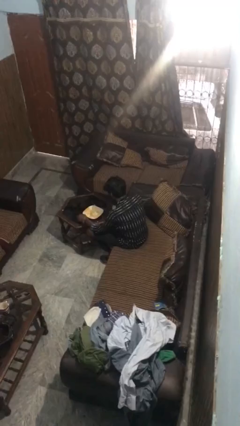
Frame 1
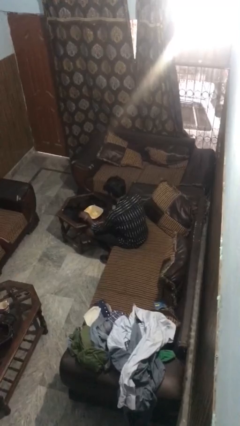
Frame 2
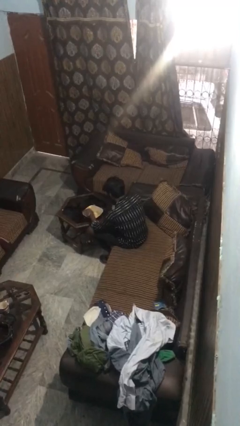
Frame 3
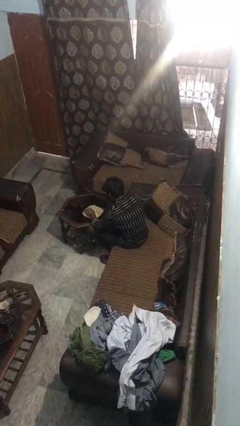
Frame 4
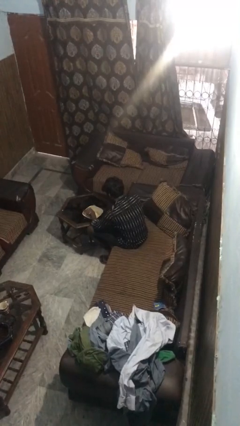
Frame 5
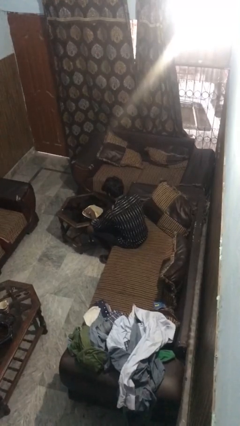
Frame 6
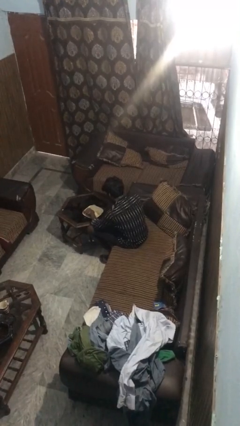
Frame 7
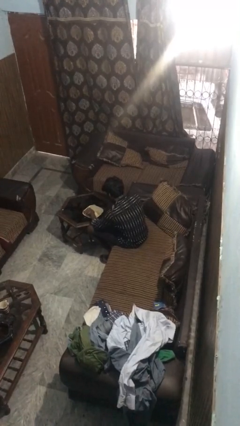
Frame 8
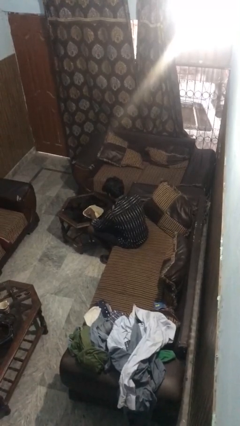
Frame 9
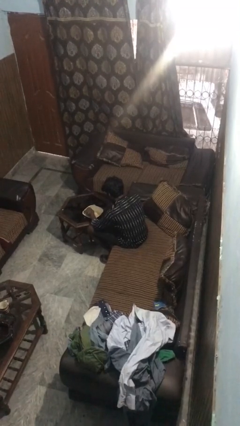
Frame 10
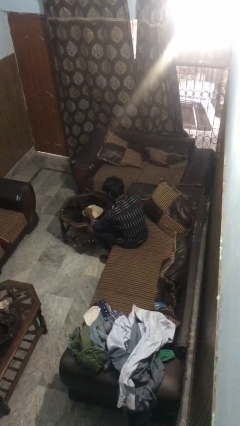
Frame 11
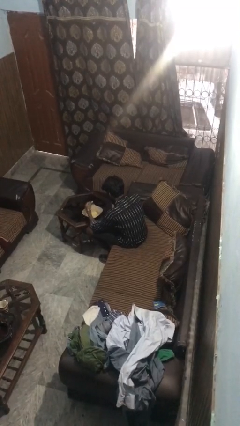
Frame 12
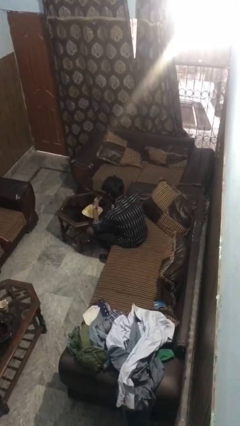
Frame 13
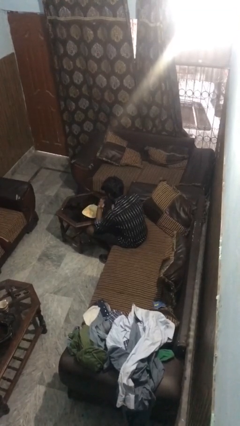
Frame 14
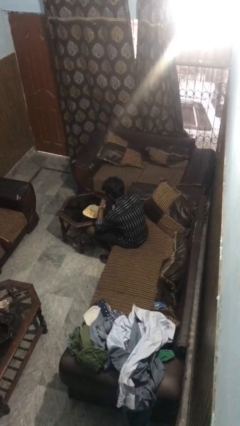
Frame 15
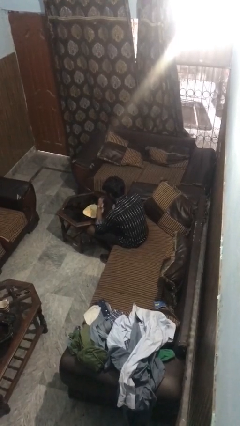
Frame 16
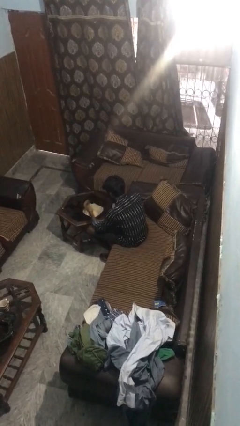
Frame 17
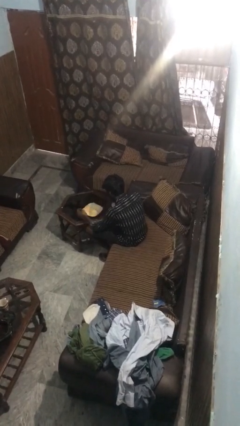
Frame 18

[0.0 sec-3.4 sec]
person eats with hands

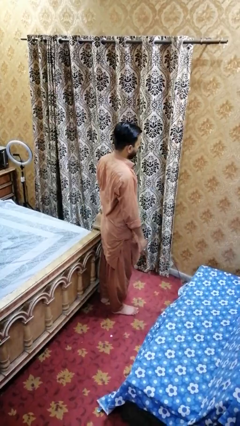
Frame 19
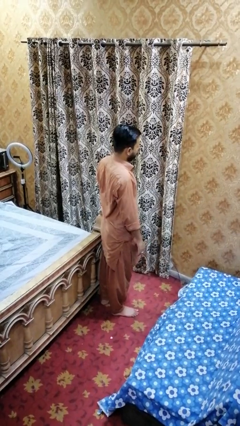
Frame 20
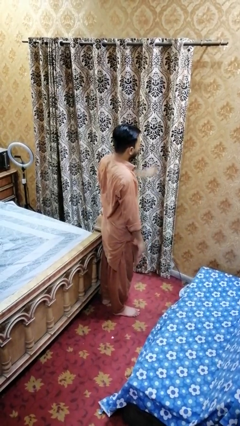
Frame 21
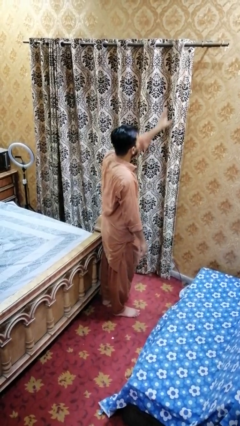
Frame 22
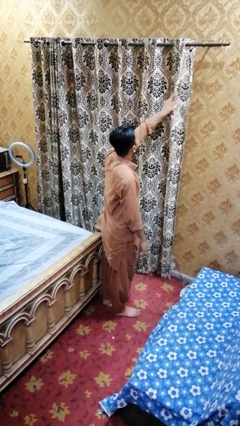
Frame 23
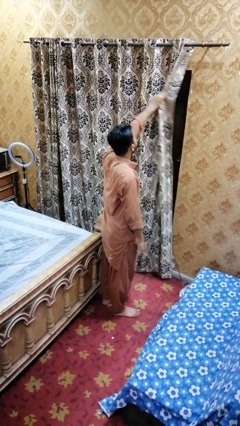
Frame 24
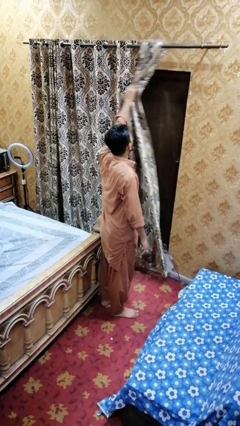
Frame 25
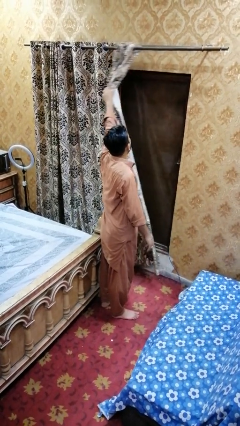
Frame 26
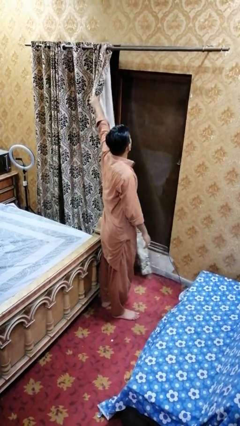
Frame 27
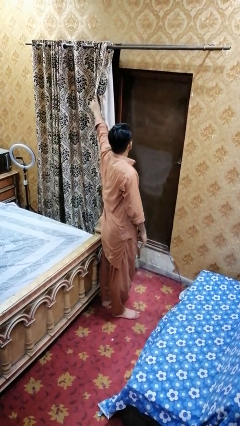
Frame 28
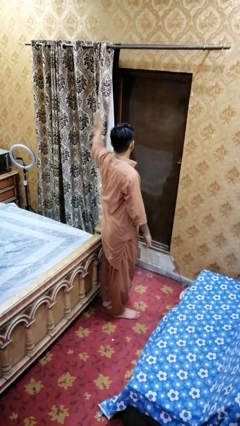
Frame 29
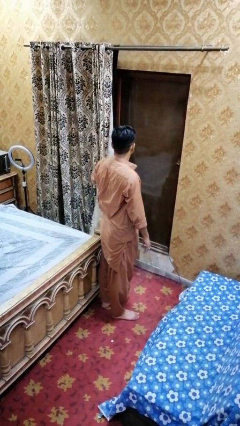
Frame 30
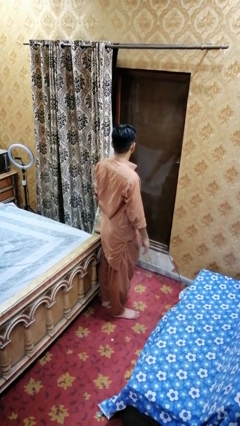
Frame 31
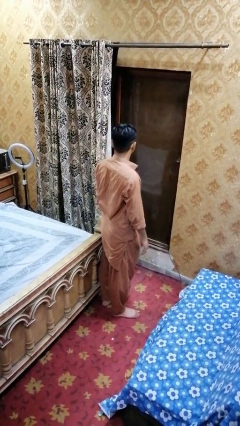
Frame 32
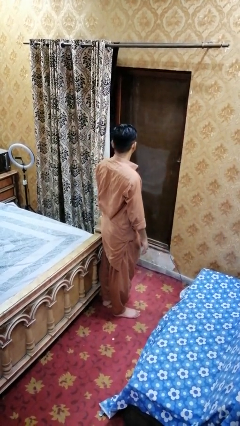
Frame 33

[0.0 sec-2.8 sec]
person opens curtains

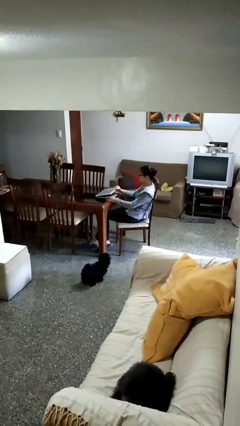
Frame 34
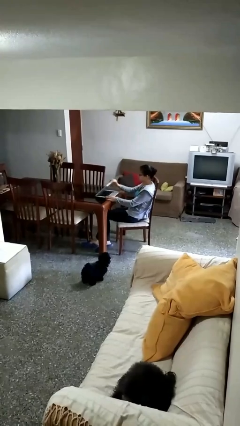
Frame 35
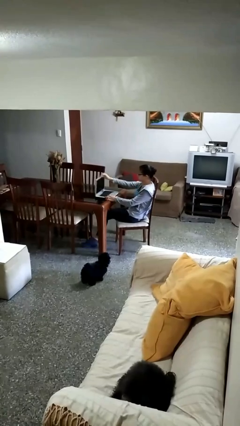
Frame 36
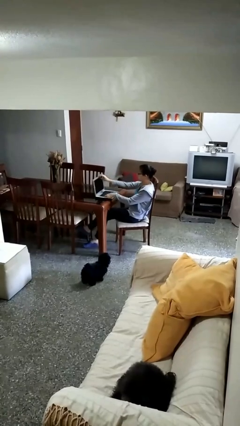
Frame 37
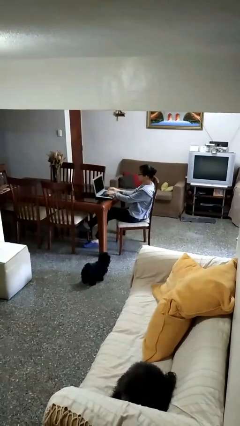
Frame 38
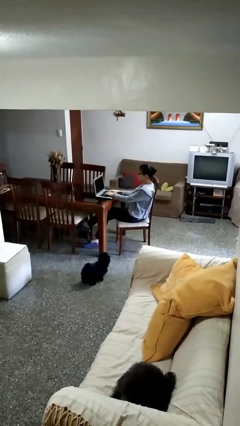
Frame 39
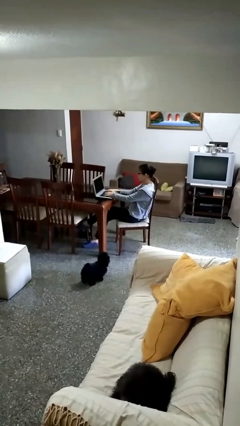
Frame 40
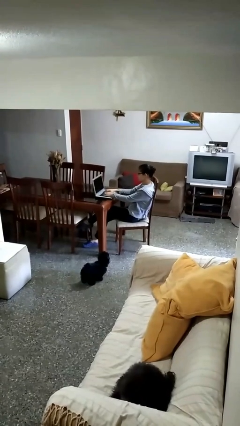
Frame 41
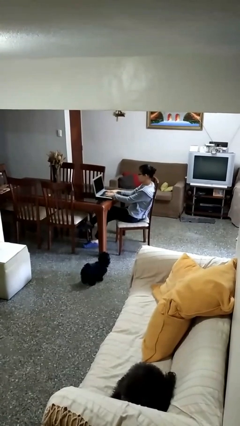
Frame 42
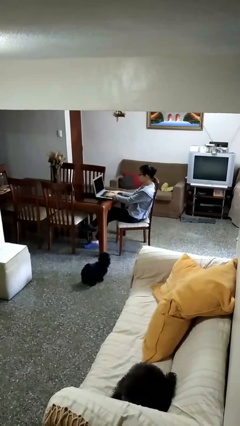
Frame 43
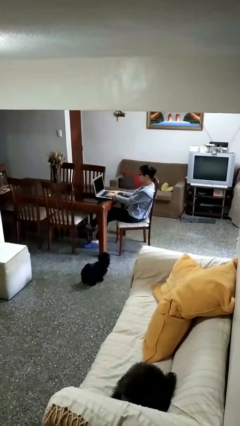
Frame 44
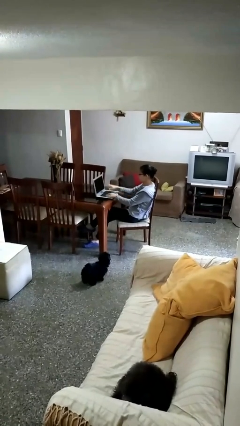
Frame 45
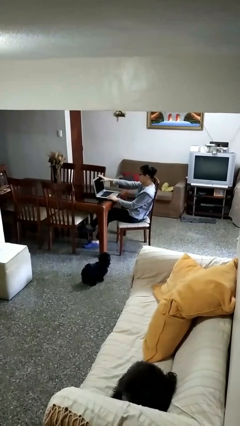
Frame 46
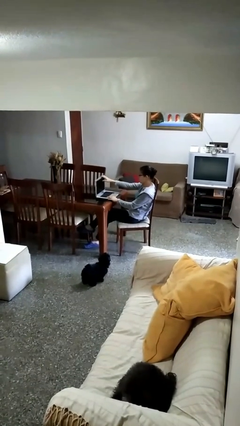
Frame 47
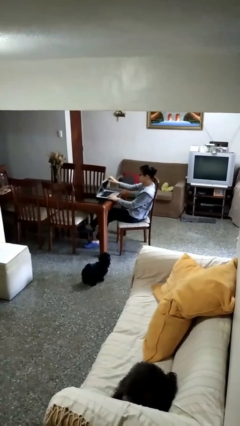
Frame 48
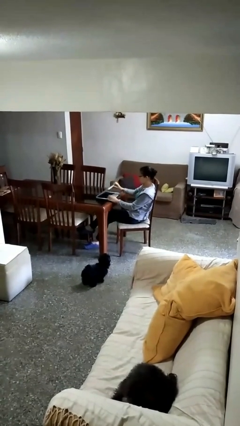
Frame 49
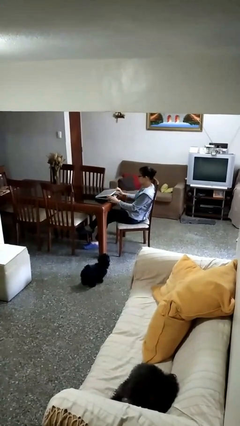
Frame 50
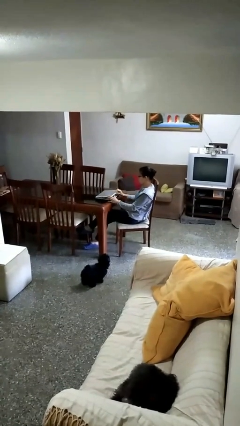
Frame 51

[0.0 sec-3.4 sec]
person interacts with laptop

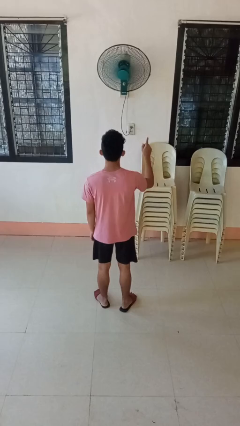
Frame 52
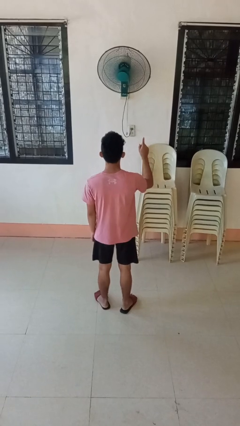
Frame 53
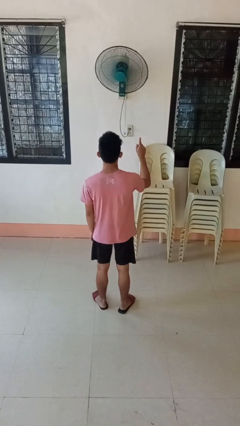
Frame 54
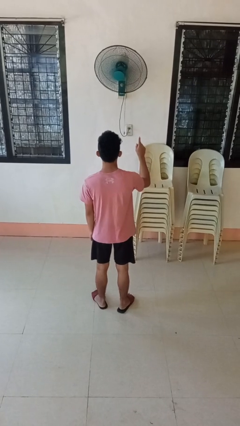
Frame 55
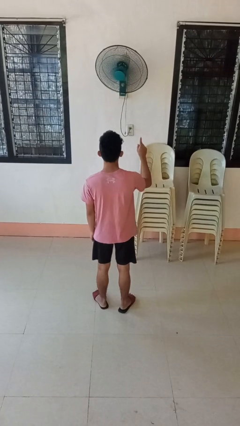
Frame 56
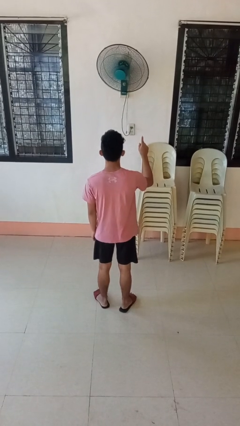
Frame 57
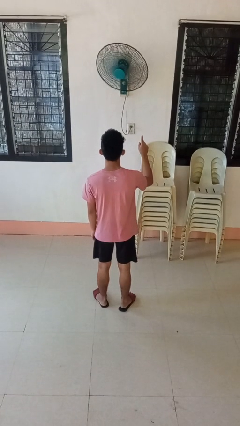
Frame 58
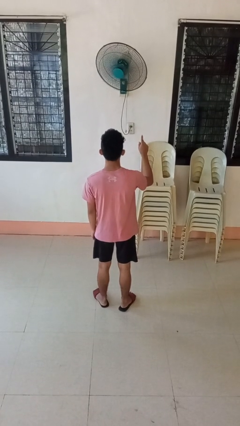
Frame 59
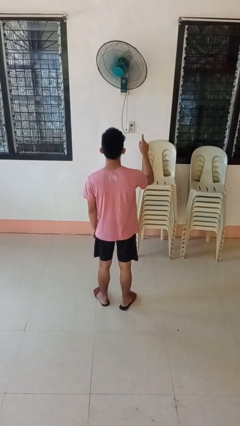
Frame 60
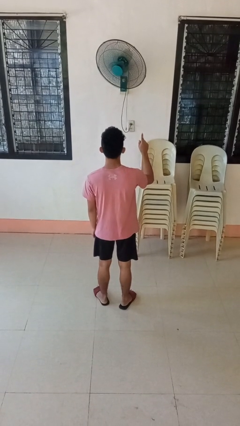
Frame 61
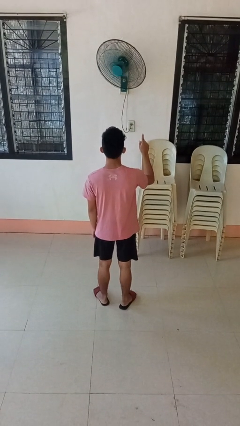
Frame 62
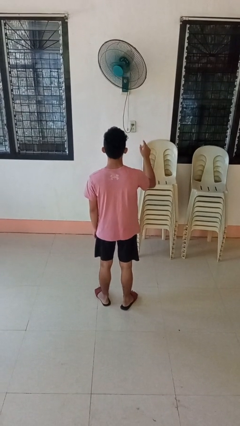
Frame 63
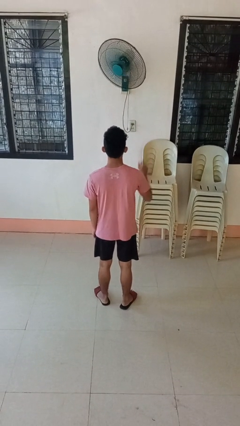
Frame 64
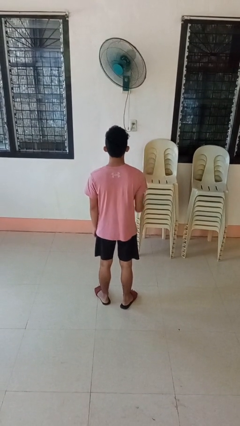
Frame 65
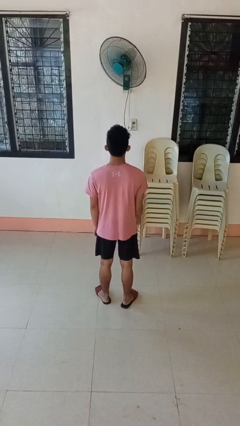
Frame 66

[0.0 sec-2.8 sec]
person gestures number one

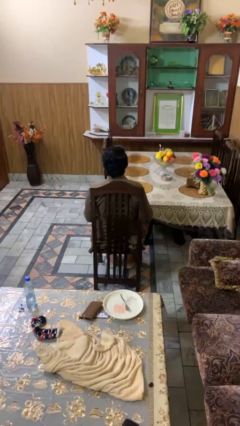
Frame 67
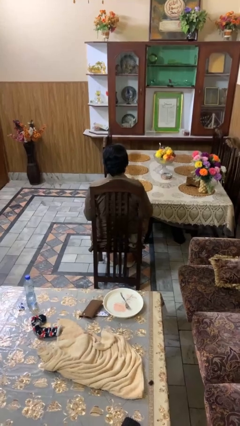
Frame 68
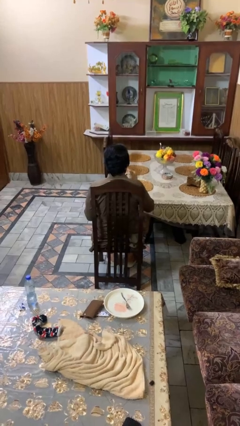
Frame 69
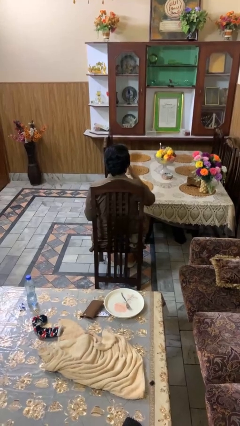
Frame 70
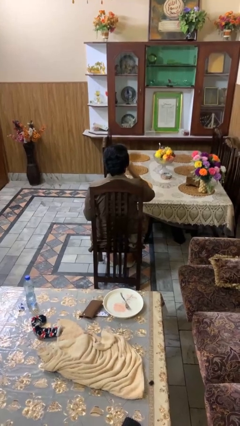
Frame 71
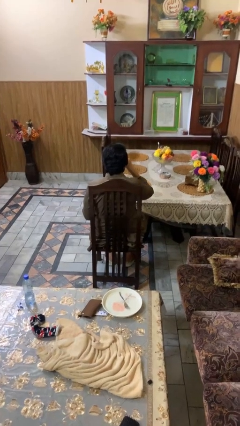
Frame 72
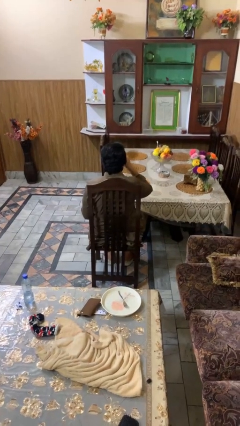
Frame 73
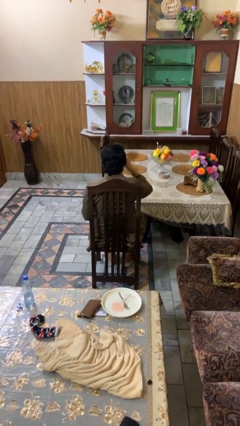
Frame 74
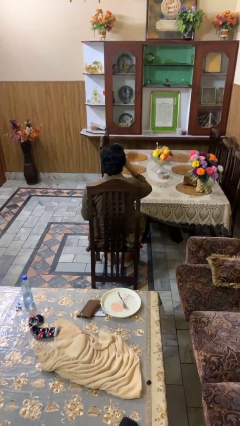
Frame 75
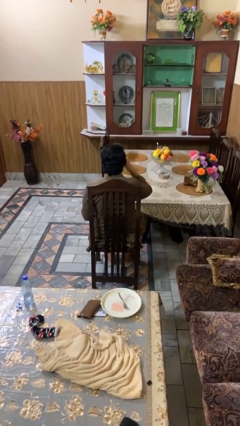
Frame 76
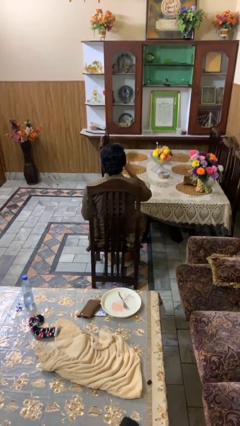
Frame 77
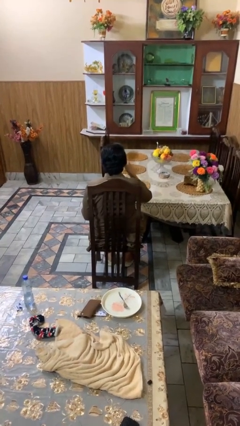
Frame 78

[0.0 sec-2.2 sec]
person drinks from mug

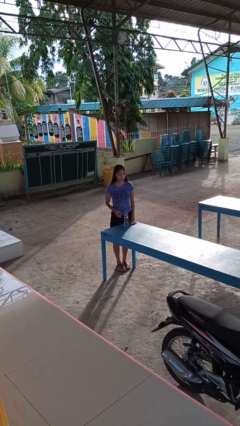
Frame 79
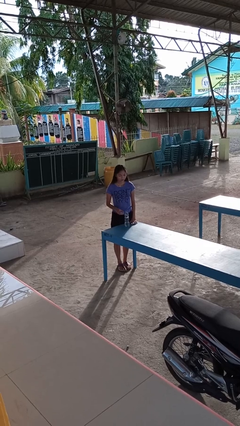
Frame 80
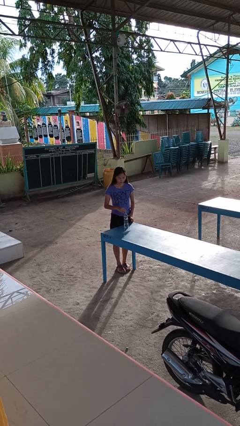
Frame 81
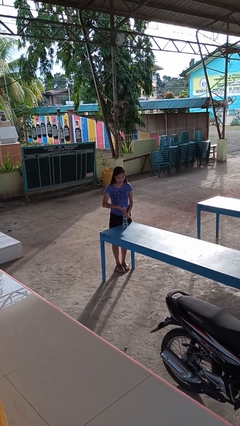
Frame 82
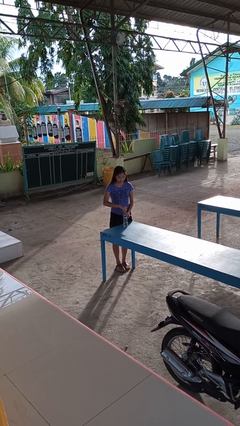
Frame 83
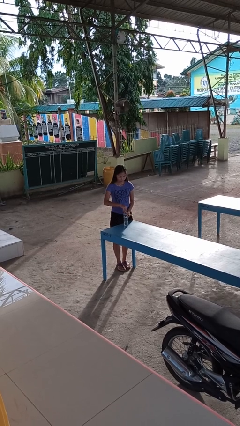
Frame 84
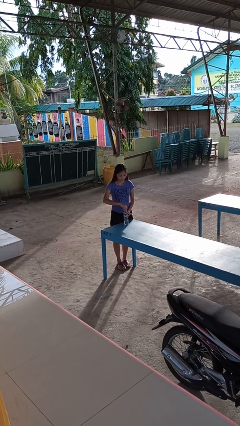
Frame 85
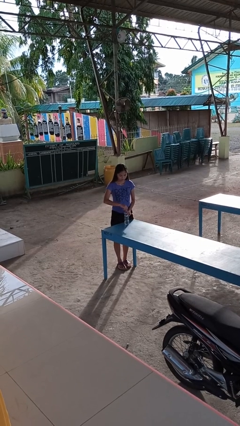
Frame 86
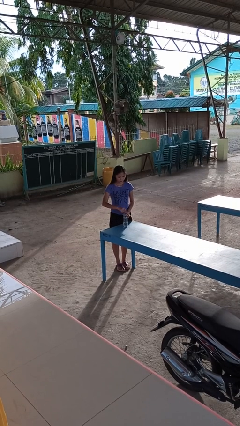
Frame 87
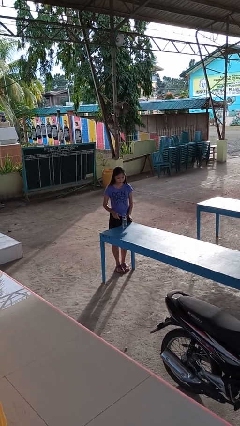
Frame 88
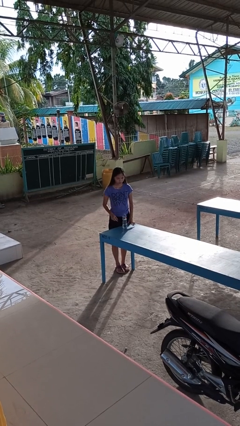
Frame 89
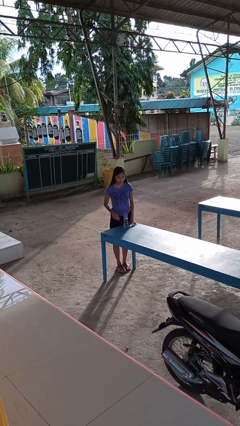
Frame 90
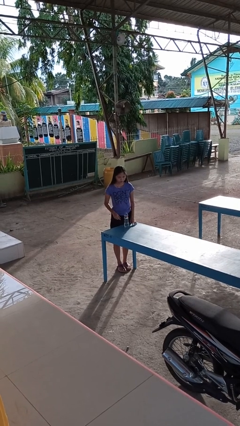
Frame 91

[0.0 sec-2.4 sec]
person screws lid to bottle

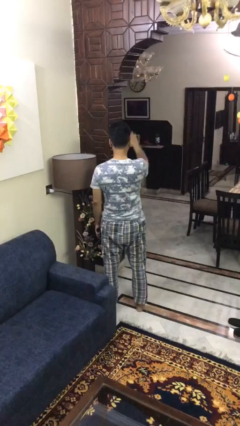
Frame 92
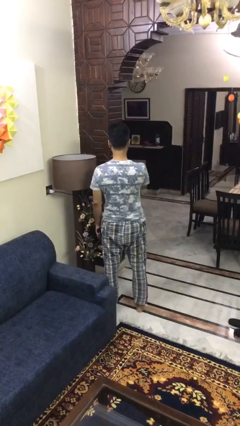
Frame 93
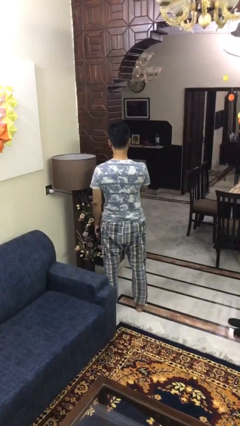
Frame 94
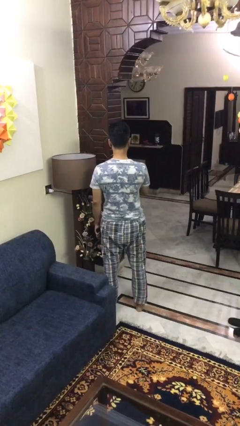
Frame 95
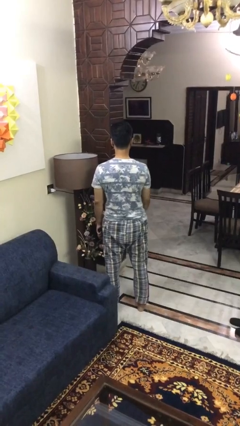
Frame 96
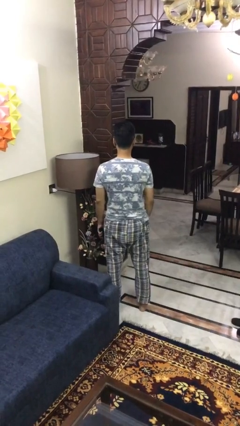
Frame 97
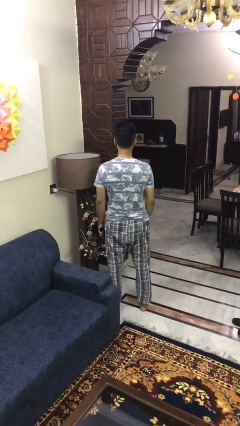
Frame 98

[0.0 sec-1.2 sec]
person gestures swipe down
